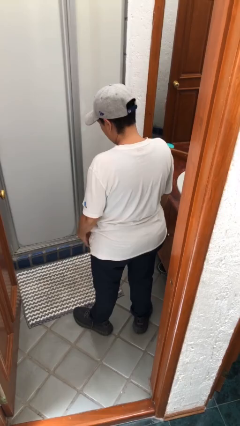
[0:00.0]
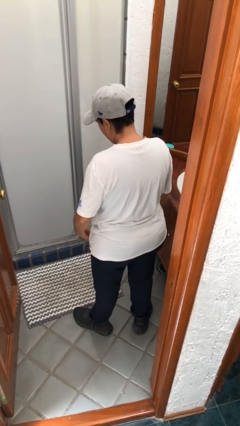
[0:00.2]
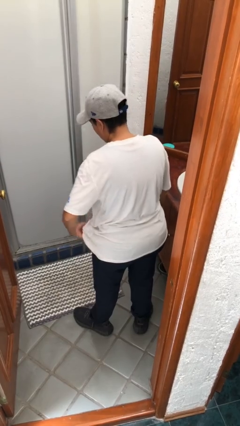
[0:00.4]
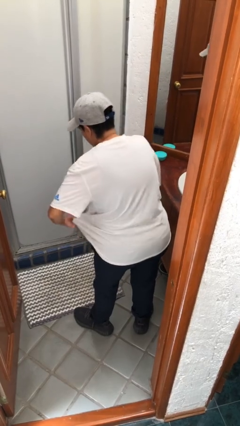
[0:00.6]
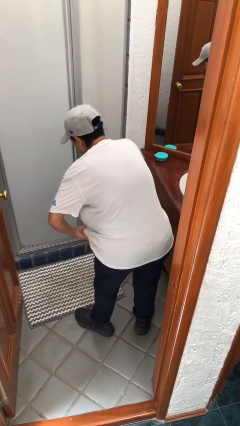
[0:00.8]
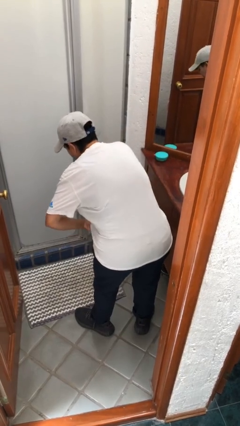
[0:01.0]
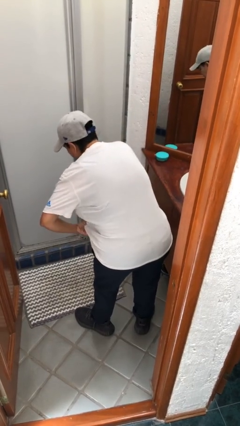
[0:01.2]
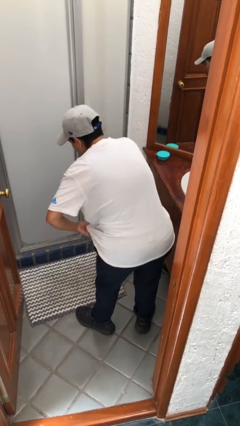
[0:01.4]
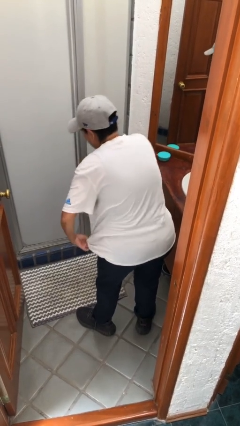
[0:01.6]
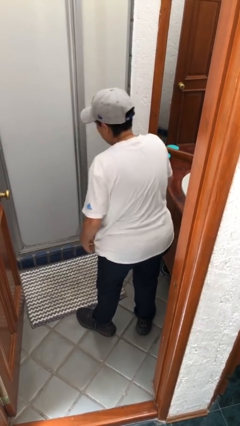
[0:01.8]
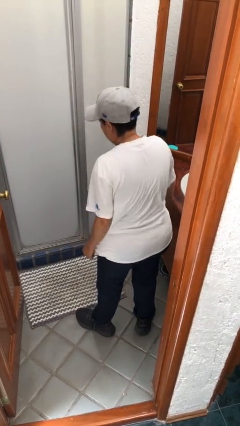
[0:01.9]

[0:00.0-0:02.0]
person applies deodorant

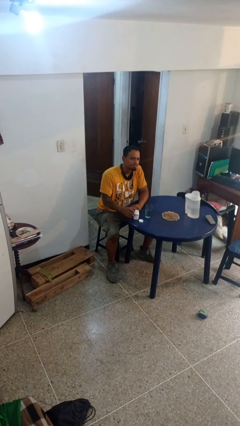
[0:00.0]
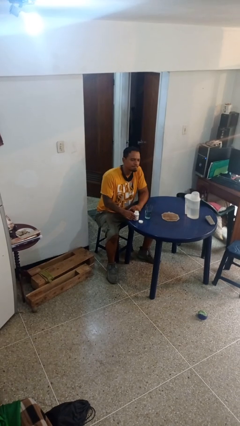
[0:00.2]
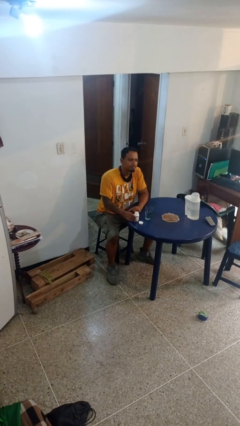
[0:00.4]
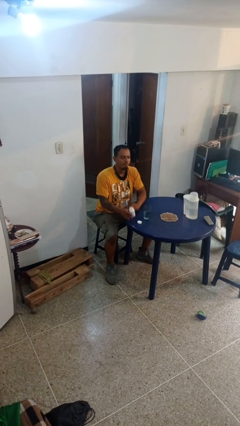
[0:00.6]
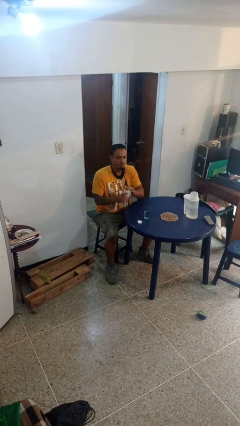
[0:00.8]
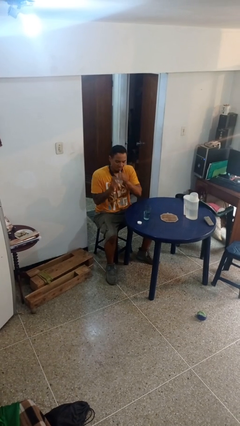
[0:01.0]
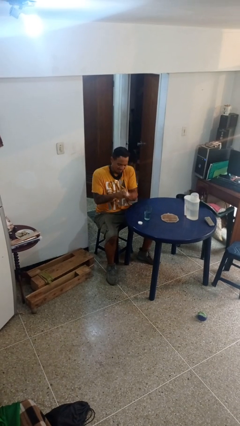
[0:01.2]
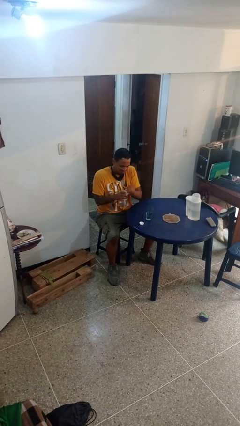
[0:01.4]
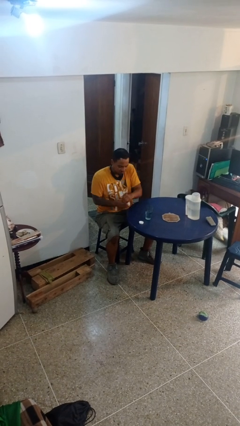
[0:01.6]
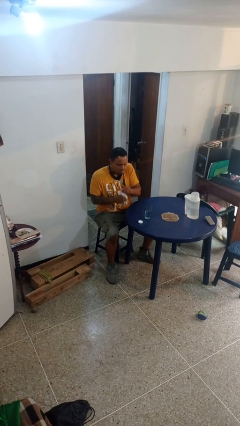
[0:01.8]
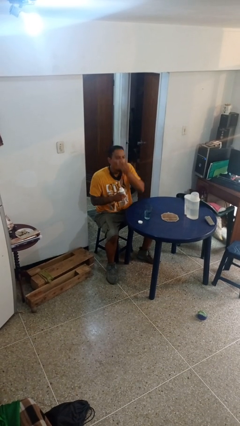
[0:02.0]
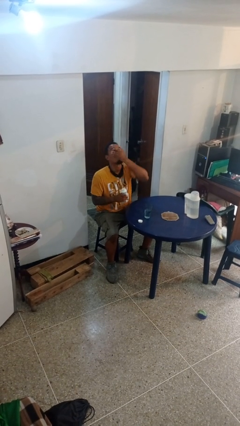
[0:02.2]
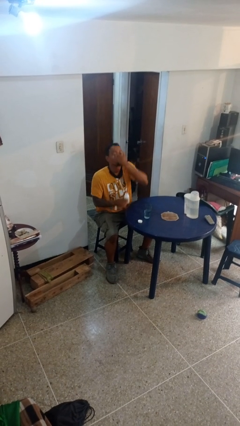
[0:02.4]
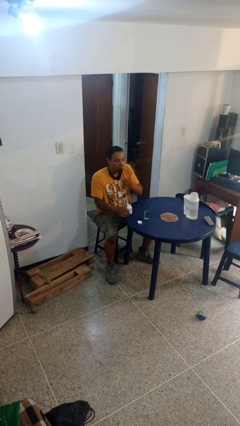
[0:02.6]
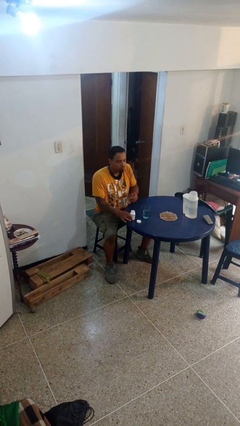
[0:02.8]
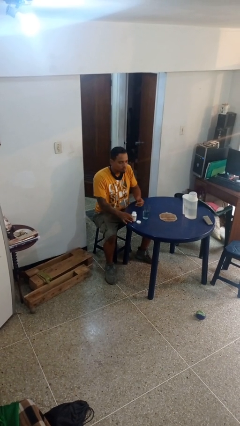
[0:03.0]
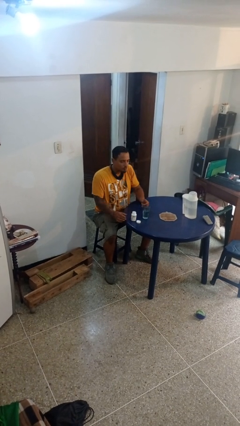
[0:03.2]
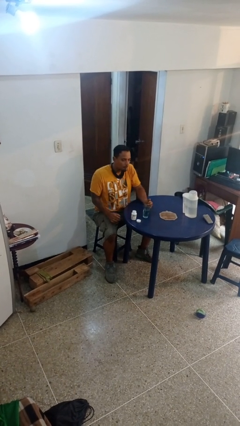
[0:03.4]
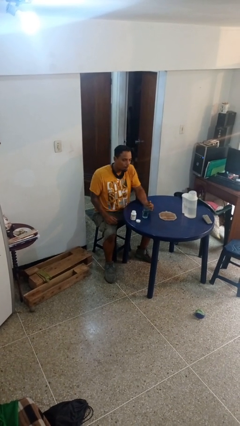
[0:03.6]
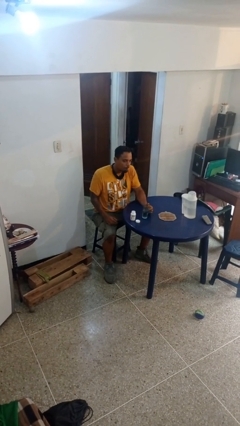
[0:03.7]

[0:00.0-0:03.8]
person takes medicine pills

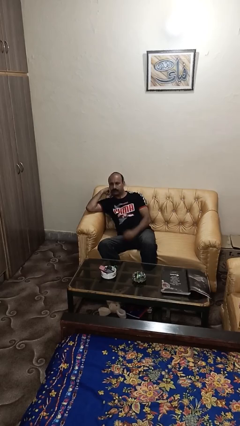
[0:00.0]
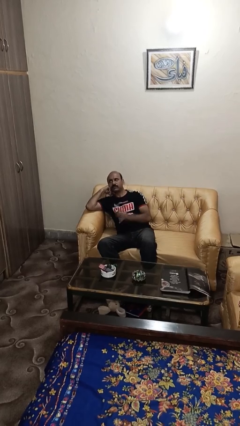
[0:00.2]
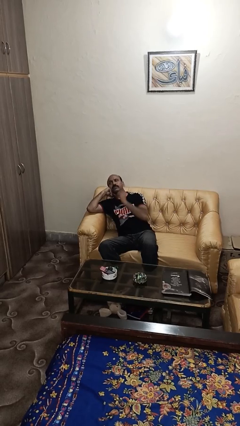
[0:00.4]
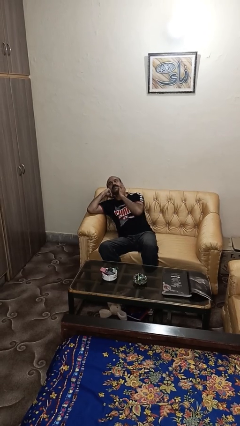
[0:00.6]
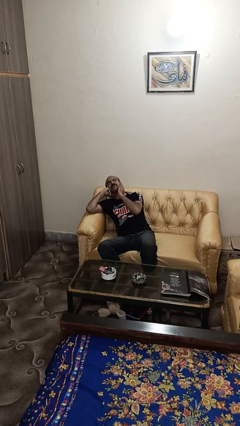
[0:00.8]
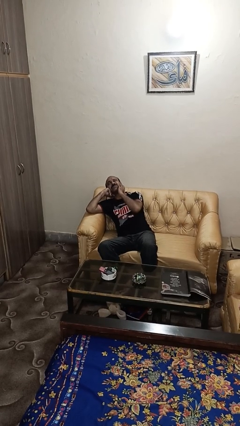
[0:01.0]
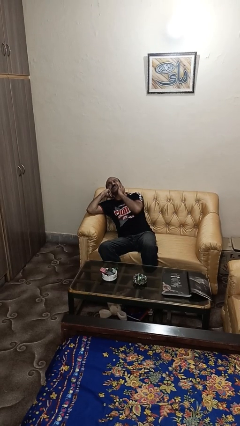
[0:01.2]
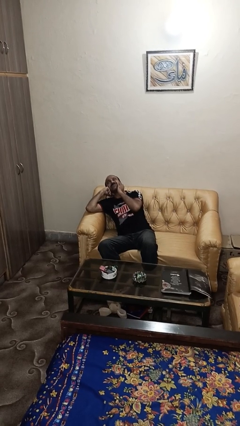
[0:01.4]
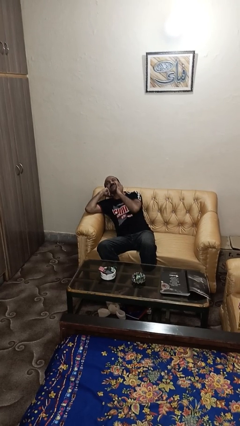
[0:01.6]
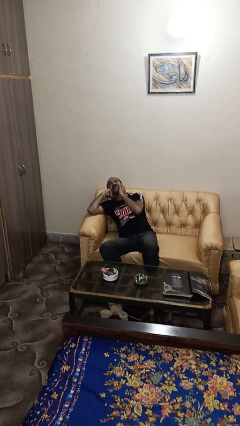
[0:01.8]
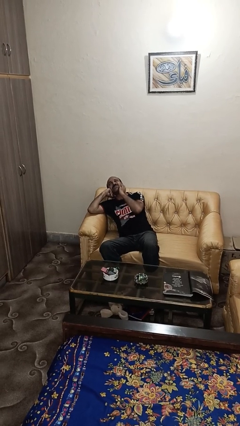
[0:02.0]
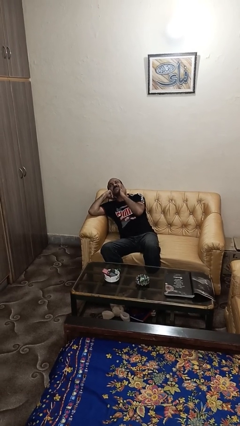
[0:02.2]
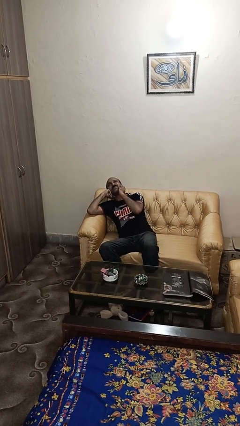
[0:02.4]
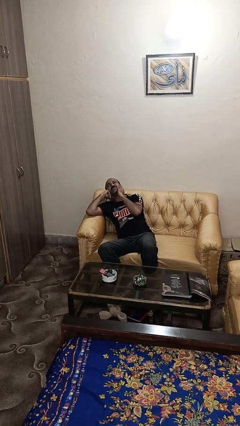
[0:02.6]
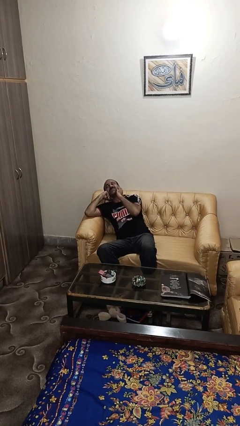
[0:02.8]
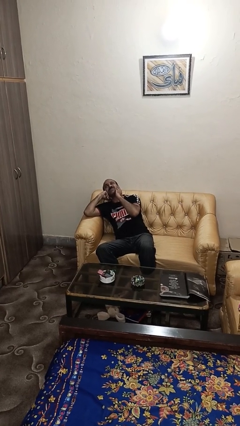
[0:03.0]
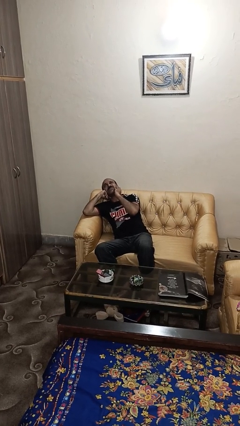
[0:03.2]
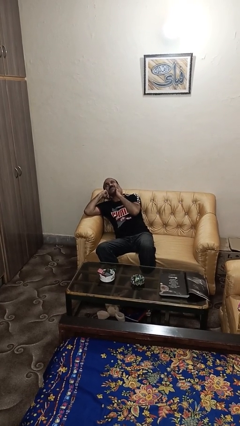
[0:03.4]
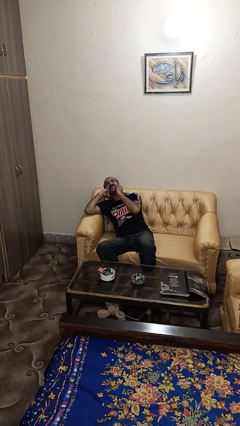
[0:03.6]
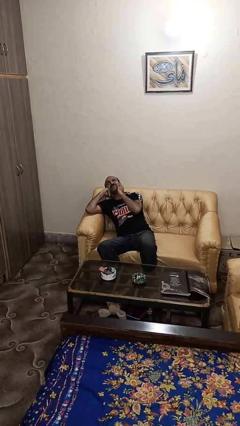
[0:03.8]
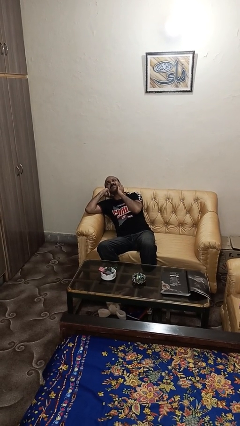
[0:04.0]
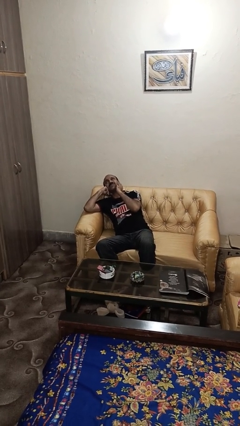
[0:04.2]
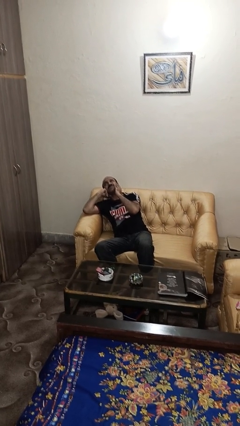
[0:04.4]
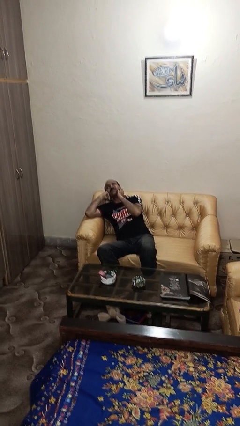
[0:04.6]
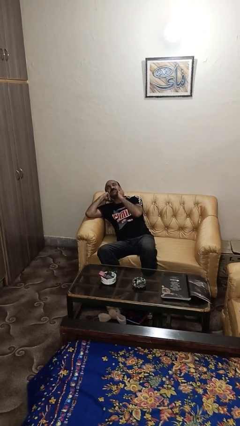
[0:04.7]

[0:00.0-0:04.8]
person strokes chin

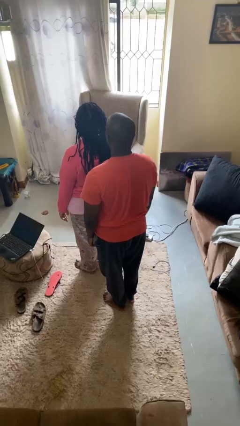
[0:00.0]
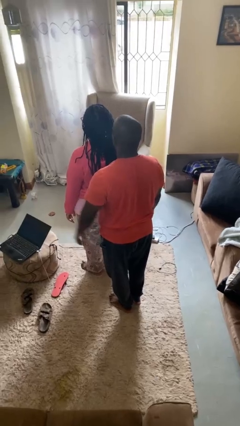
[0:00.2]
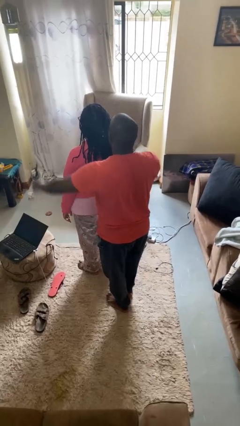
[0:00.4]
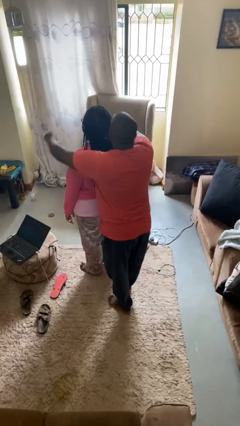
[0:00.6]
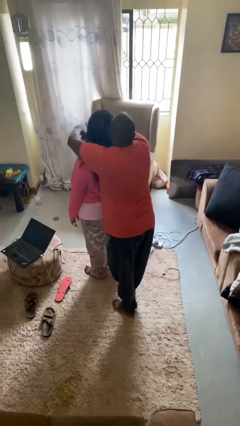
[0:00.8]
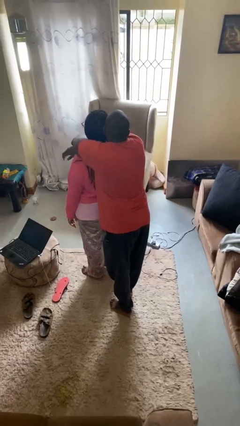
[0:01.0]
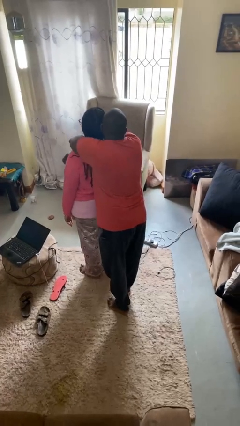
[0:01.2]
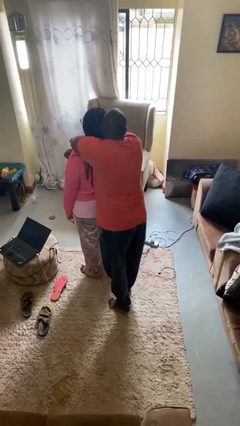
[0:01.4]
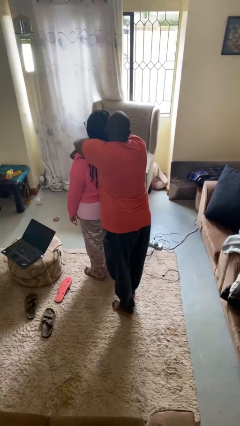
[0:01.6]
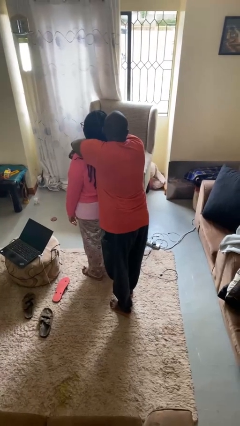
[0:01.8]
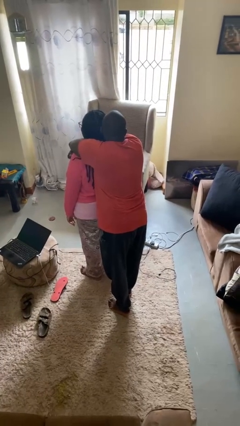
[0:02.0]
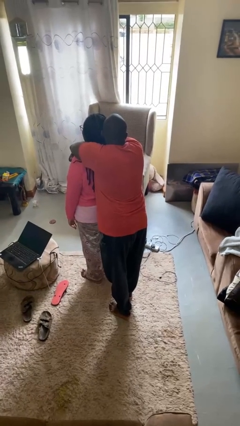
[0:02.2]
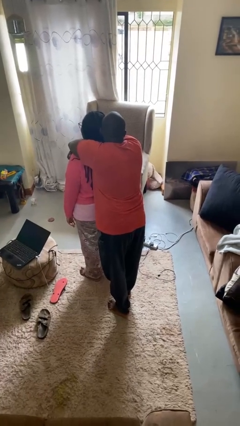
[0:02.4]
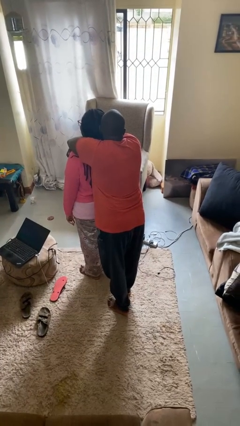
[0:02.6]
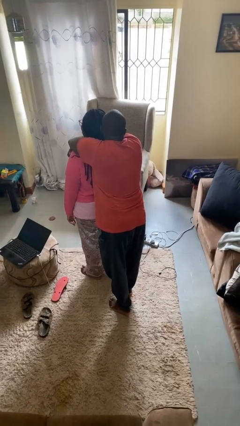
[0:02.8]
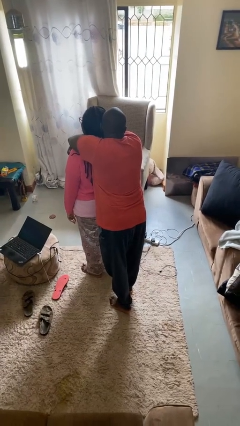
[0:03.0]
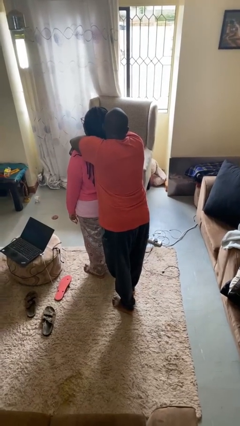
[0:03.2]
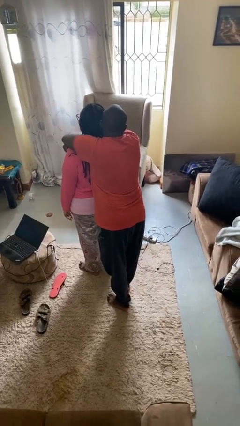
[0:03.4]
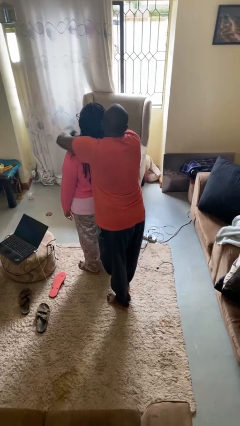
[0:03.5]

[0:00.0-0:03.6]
person hugs person from behind

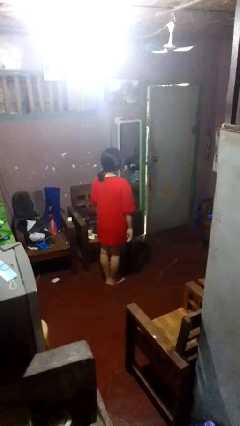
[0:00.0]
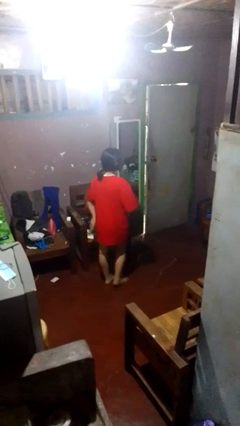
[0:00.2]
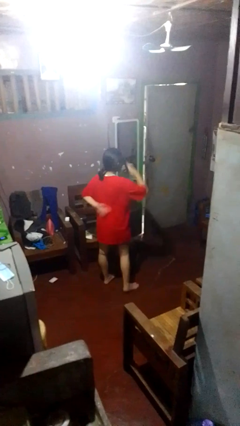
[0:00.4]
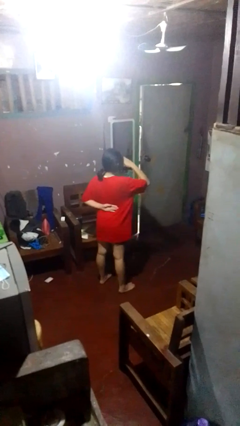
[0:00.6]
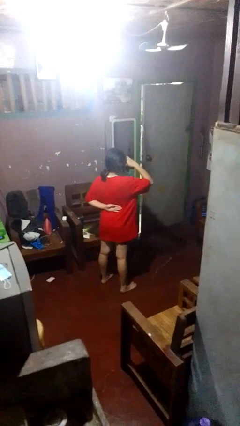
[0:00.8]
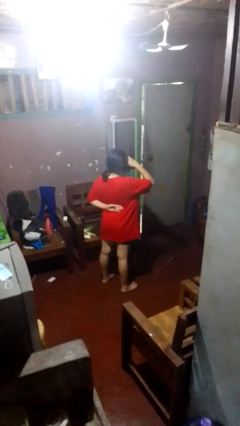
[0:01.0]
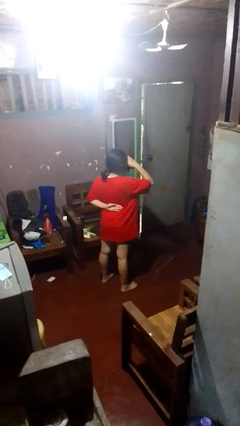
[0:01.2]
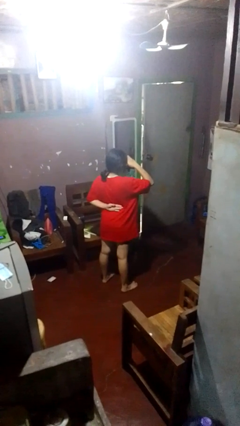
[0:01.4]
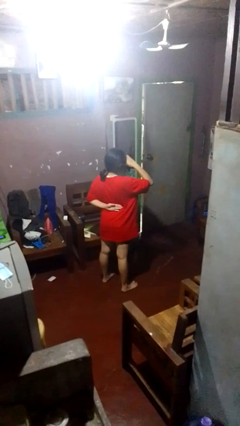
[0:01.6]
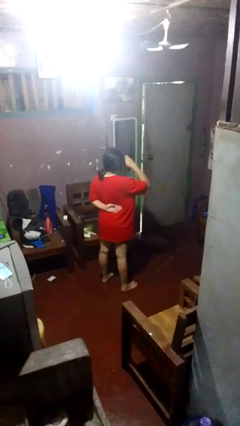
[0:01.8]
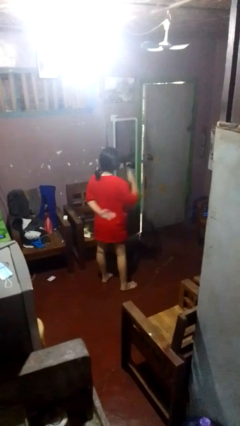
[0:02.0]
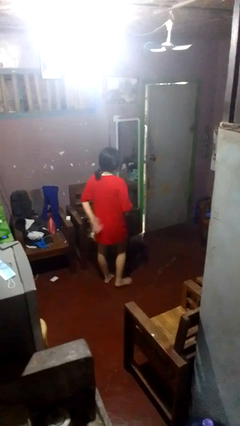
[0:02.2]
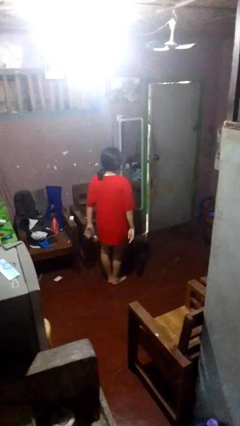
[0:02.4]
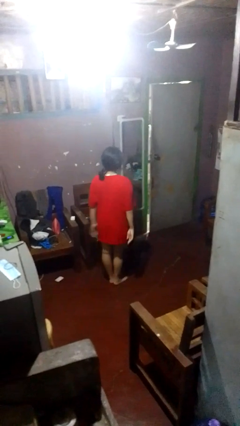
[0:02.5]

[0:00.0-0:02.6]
person salutes

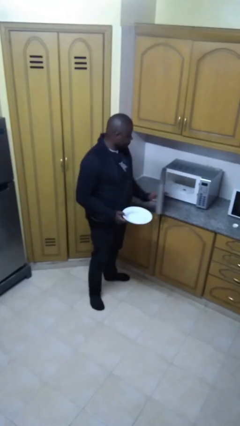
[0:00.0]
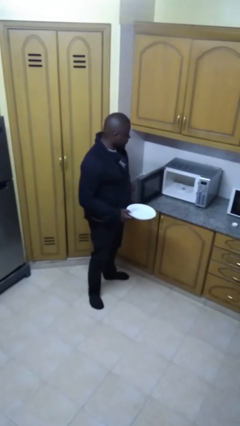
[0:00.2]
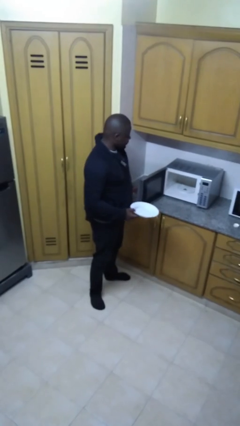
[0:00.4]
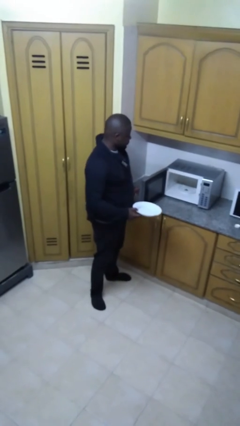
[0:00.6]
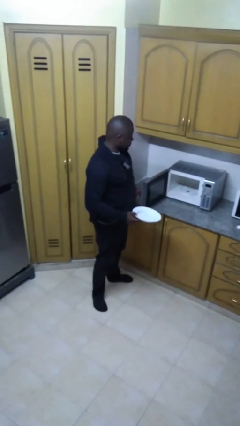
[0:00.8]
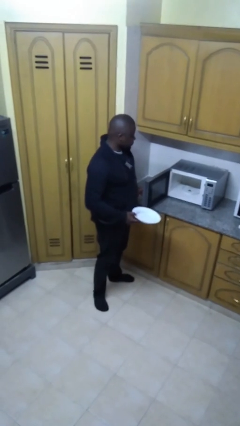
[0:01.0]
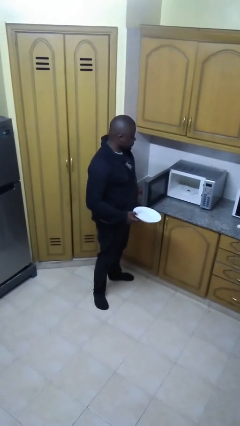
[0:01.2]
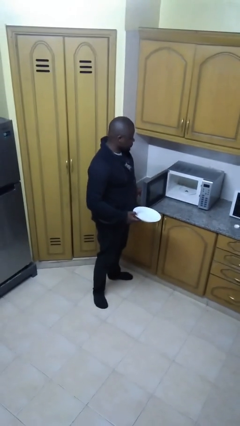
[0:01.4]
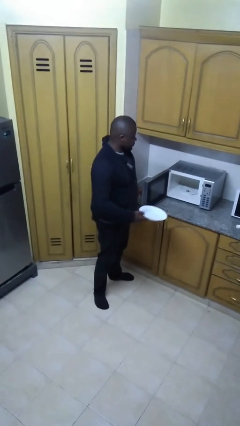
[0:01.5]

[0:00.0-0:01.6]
person opens microwave
